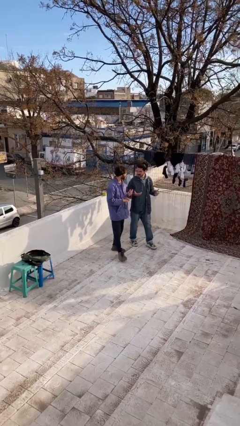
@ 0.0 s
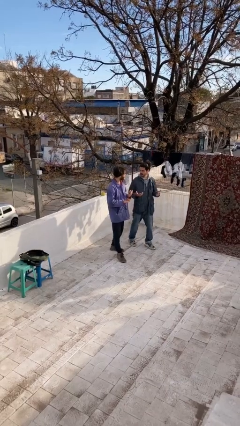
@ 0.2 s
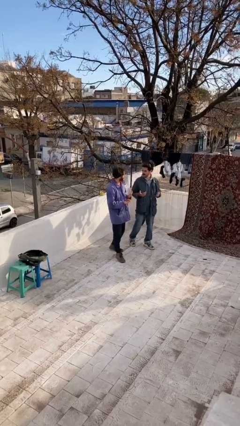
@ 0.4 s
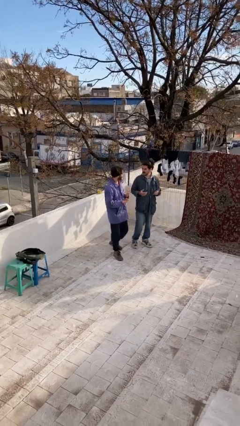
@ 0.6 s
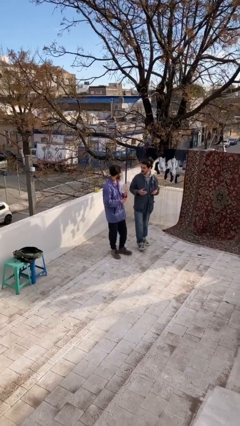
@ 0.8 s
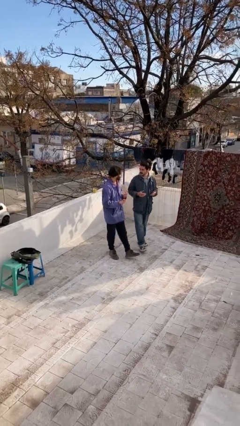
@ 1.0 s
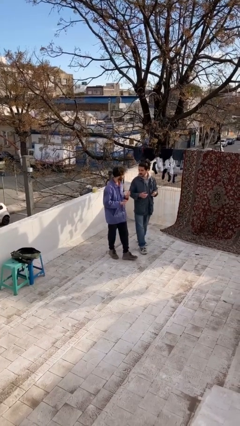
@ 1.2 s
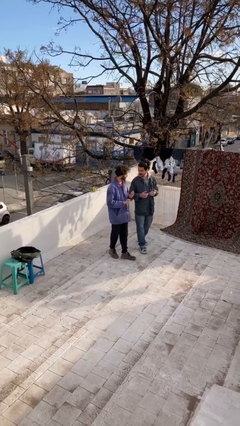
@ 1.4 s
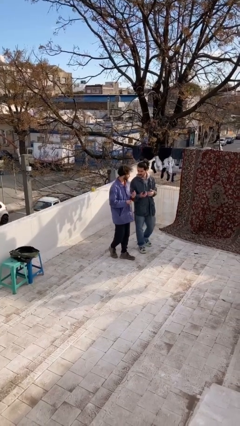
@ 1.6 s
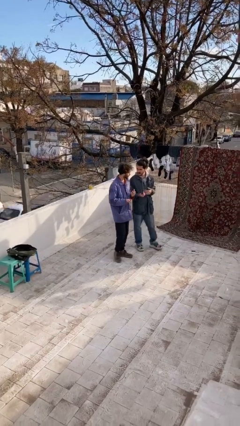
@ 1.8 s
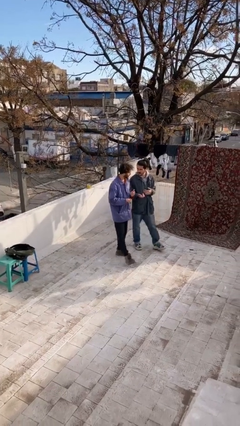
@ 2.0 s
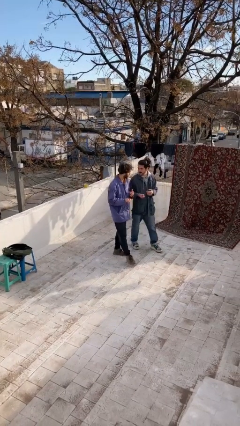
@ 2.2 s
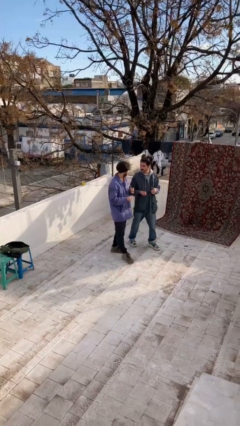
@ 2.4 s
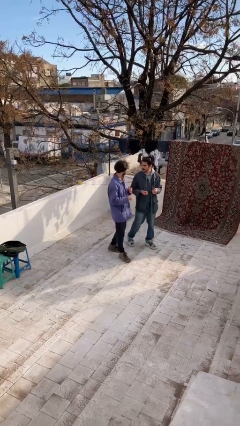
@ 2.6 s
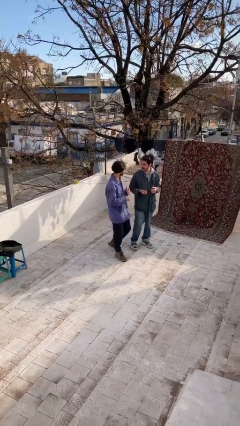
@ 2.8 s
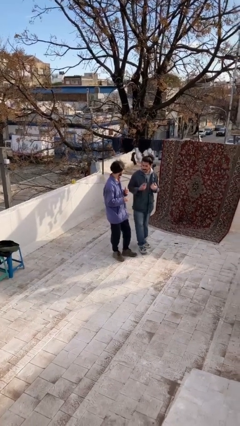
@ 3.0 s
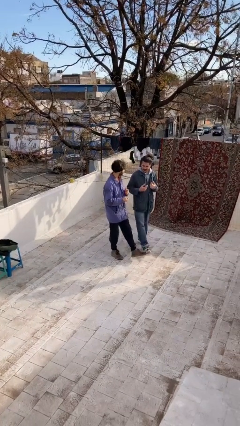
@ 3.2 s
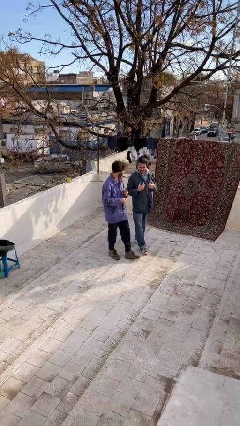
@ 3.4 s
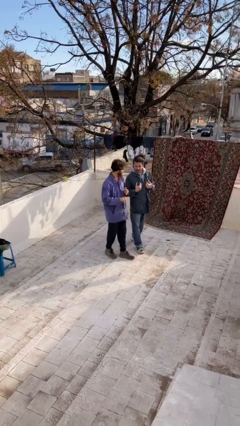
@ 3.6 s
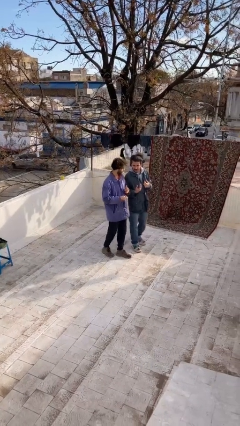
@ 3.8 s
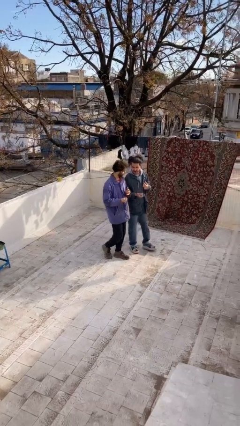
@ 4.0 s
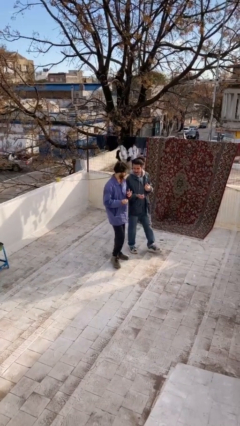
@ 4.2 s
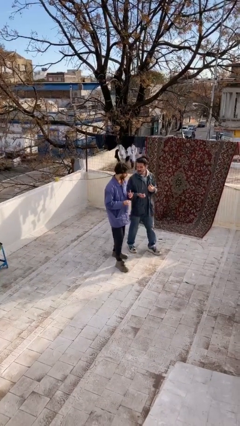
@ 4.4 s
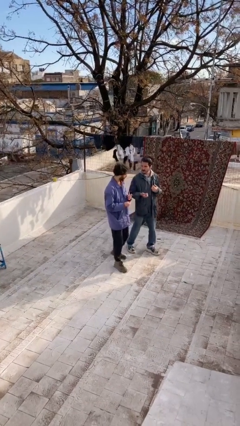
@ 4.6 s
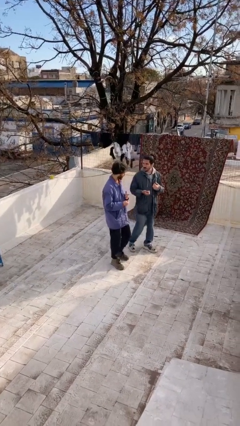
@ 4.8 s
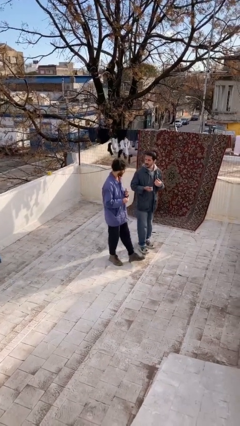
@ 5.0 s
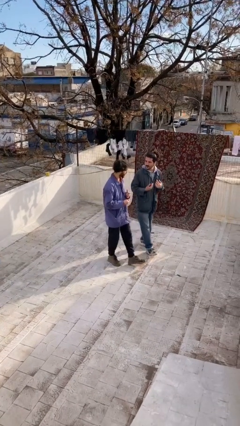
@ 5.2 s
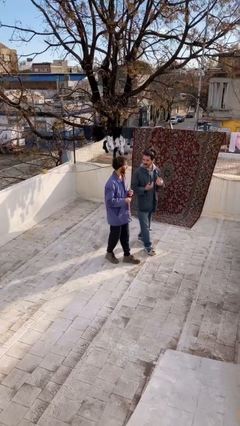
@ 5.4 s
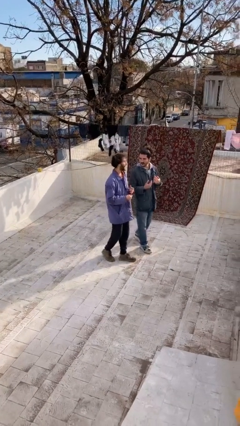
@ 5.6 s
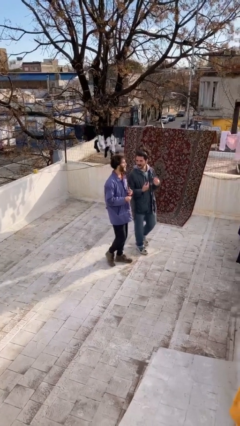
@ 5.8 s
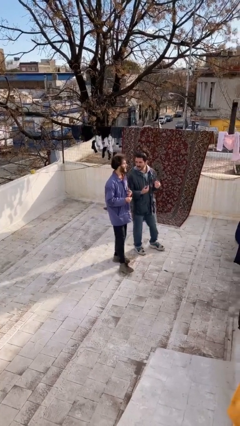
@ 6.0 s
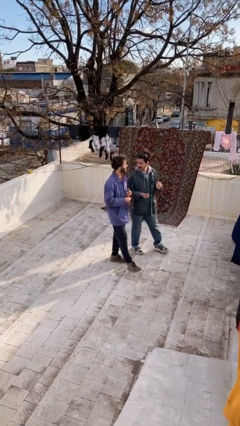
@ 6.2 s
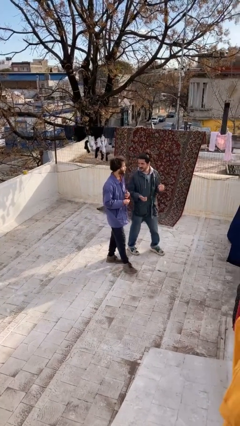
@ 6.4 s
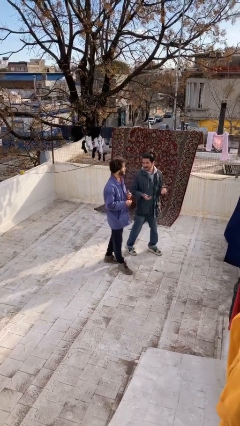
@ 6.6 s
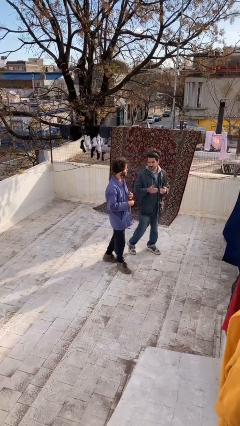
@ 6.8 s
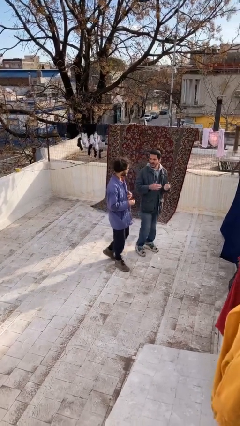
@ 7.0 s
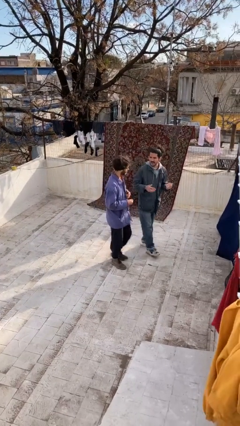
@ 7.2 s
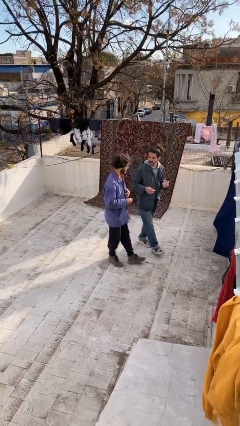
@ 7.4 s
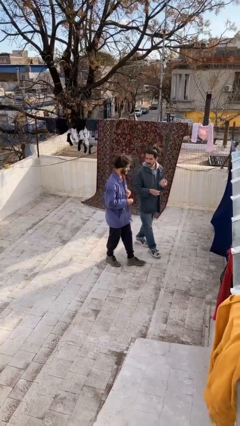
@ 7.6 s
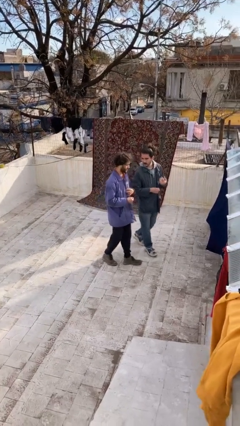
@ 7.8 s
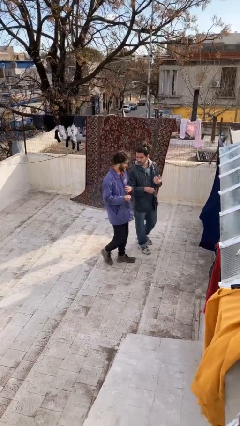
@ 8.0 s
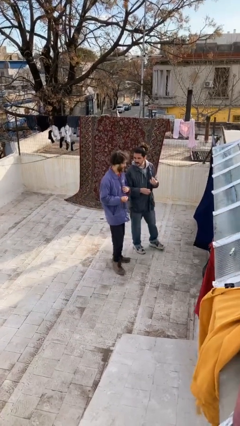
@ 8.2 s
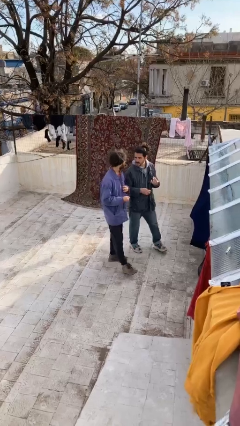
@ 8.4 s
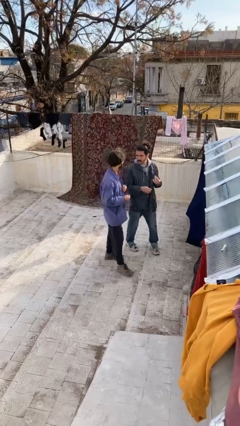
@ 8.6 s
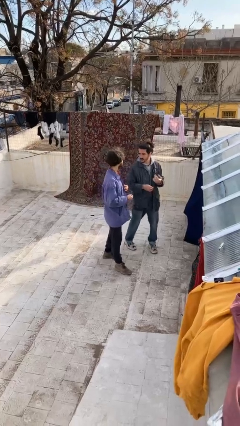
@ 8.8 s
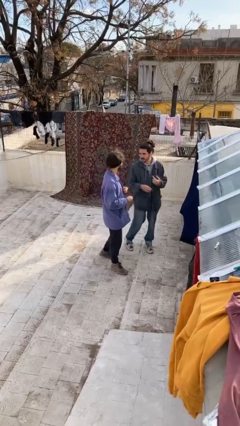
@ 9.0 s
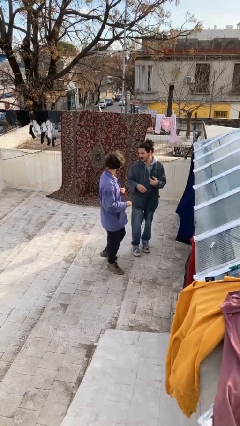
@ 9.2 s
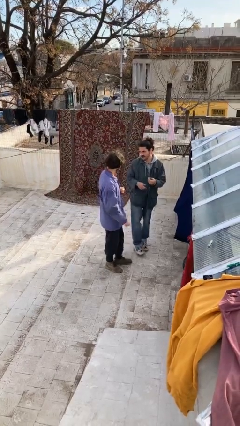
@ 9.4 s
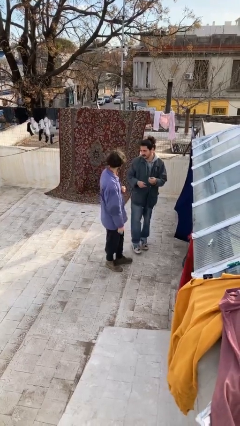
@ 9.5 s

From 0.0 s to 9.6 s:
person talks to person

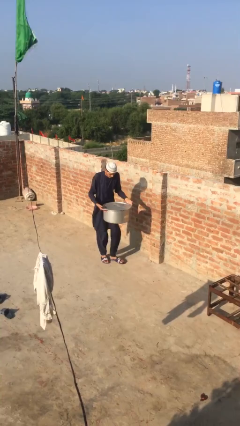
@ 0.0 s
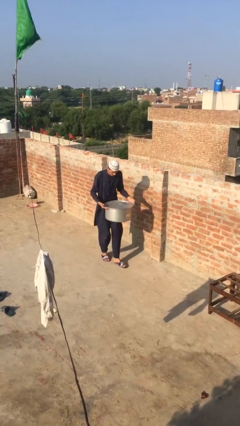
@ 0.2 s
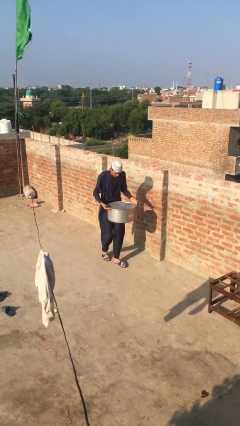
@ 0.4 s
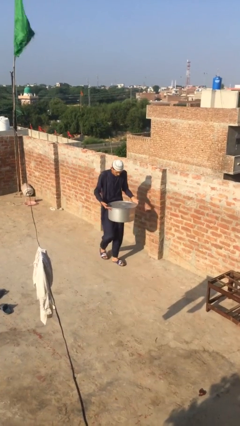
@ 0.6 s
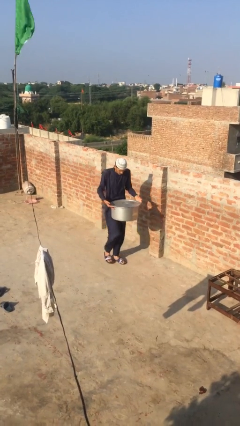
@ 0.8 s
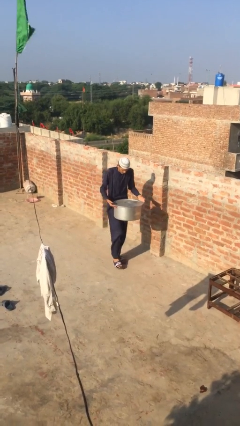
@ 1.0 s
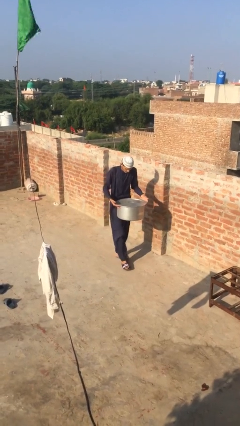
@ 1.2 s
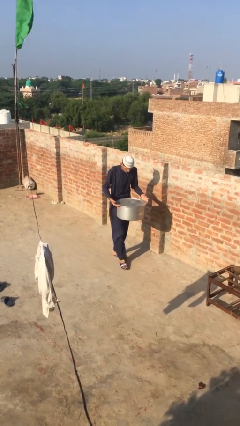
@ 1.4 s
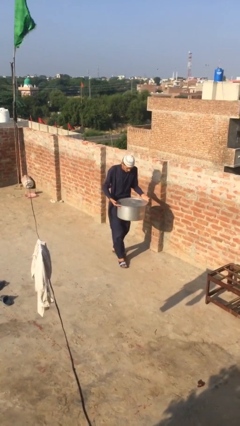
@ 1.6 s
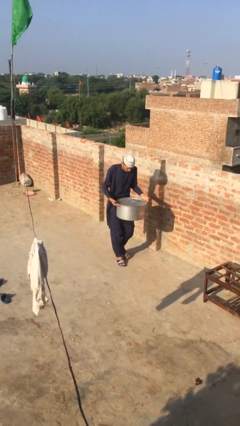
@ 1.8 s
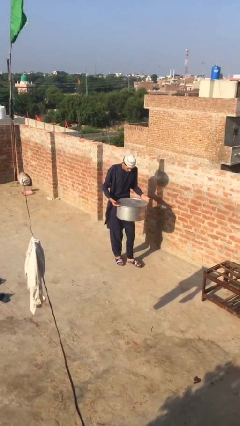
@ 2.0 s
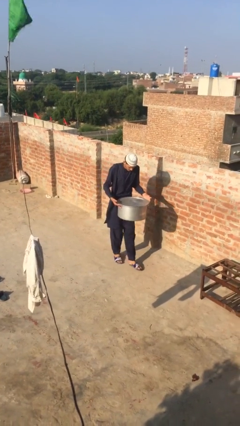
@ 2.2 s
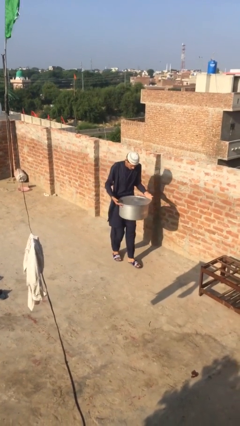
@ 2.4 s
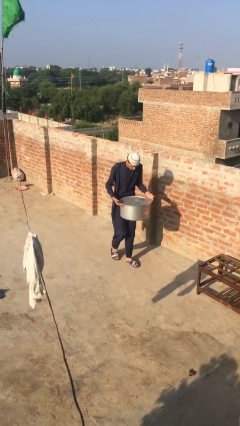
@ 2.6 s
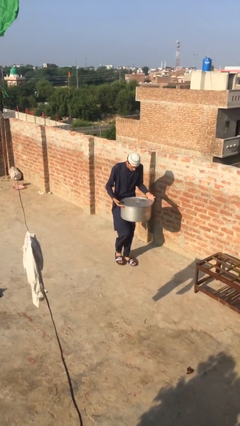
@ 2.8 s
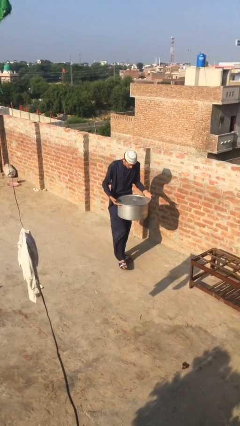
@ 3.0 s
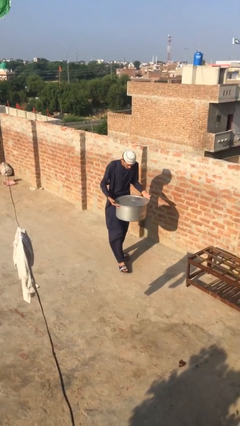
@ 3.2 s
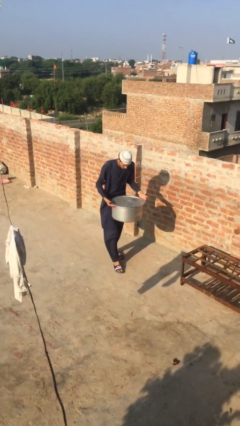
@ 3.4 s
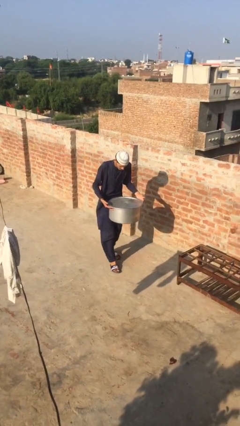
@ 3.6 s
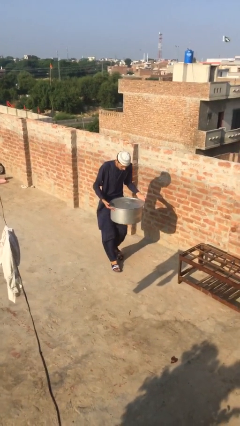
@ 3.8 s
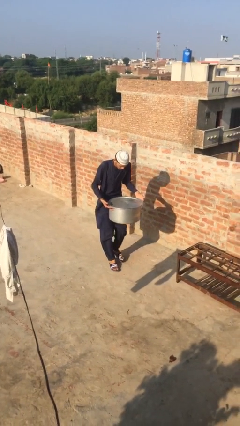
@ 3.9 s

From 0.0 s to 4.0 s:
person carries heavy object

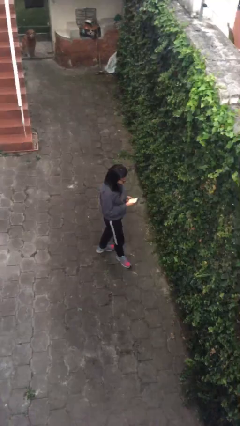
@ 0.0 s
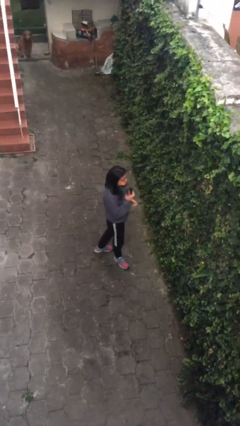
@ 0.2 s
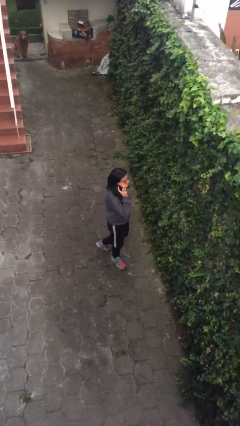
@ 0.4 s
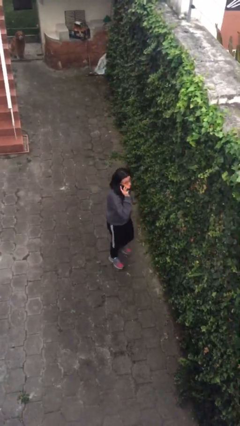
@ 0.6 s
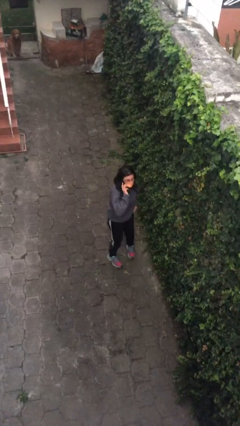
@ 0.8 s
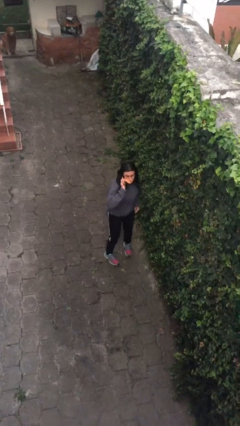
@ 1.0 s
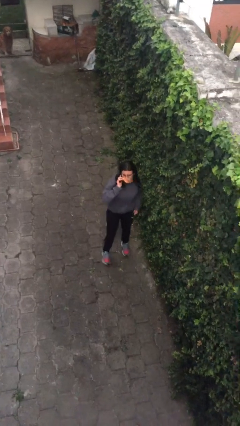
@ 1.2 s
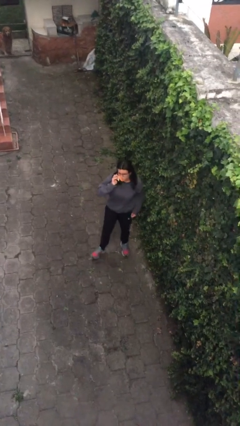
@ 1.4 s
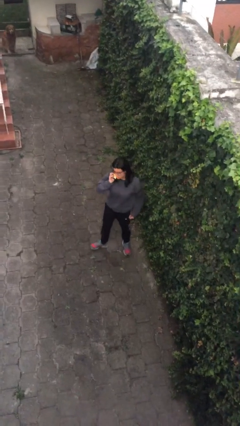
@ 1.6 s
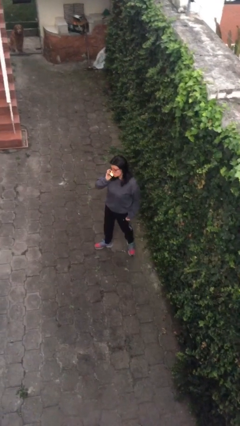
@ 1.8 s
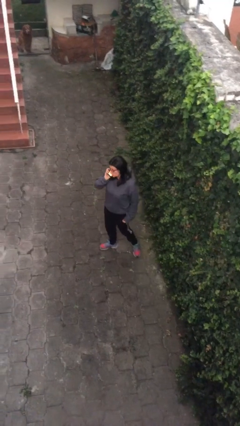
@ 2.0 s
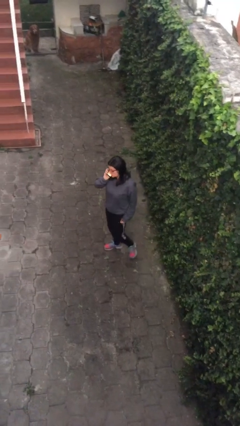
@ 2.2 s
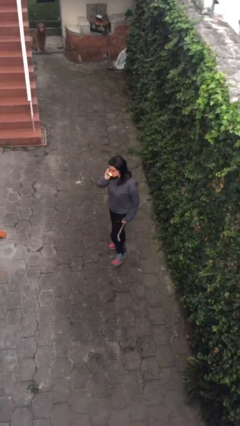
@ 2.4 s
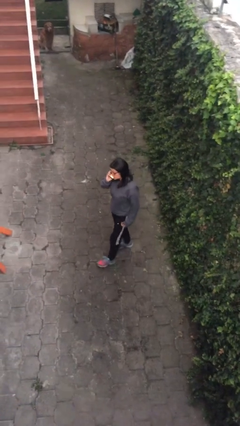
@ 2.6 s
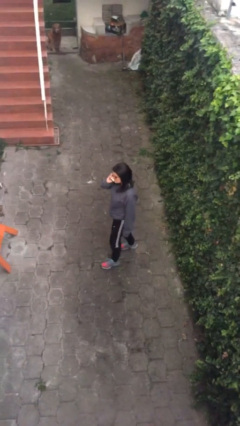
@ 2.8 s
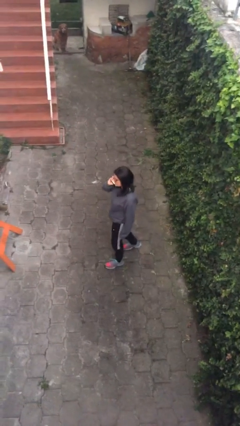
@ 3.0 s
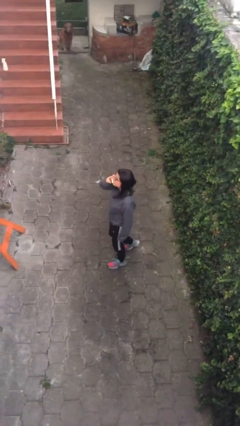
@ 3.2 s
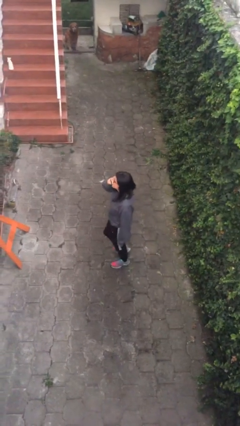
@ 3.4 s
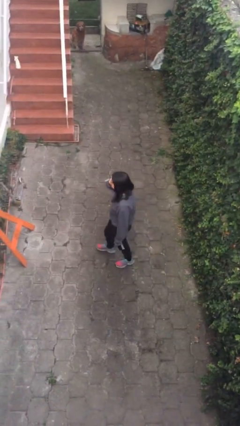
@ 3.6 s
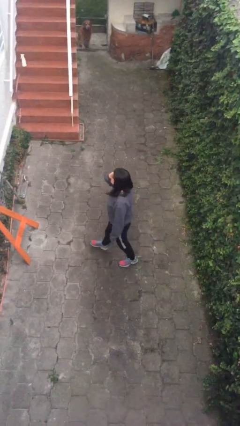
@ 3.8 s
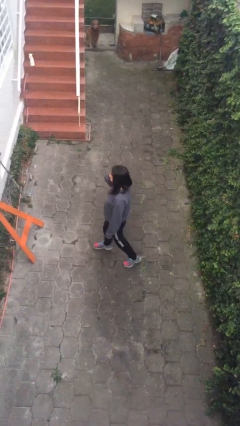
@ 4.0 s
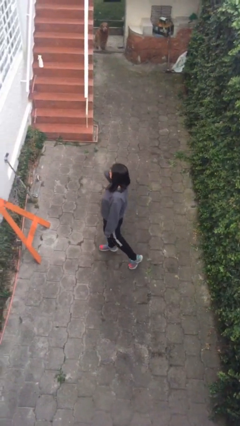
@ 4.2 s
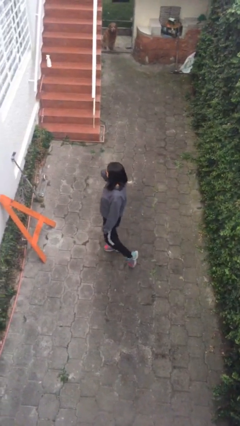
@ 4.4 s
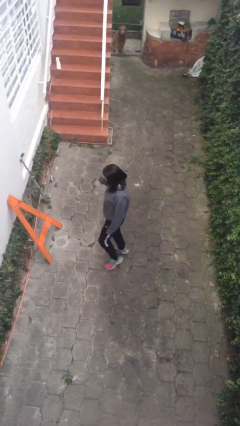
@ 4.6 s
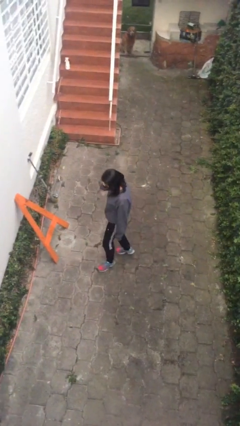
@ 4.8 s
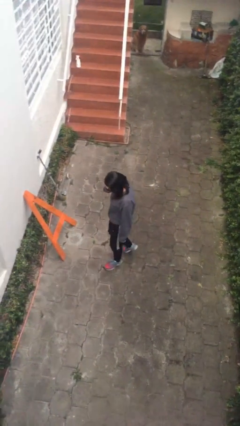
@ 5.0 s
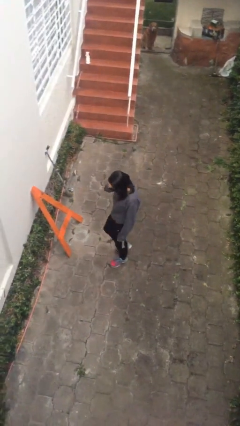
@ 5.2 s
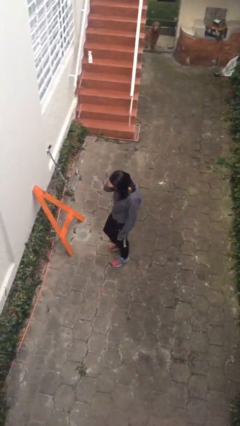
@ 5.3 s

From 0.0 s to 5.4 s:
person talks on phone
